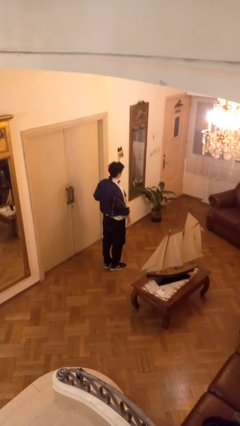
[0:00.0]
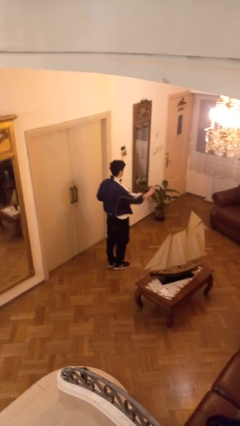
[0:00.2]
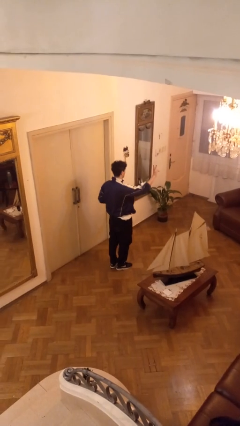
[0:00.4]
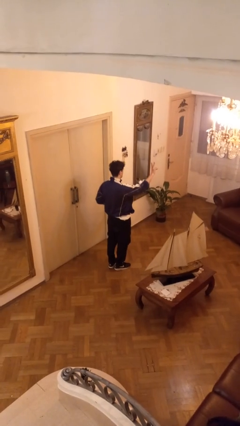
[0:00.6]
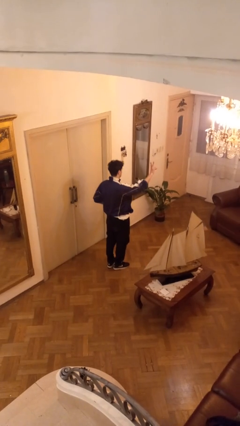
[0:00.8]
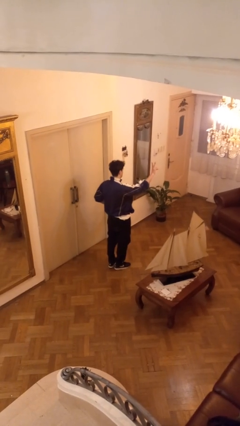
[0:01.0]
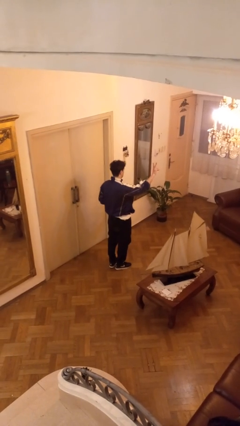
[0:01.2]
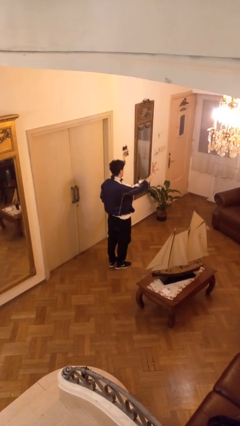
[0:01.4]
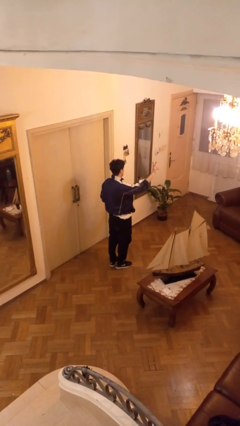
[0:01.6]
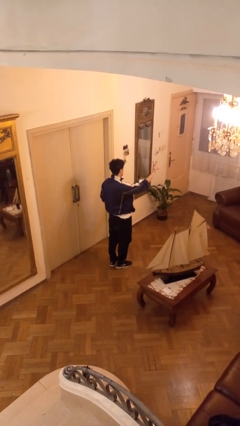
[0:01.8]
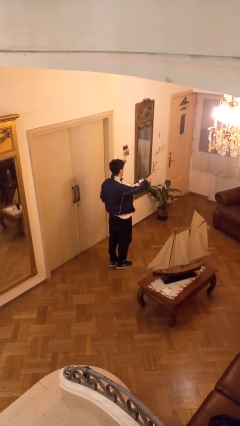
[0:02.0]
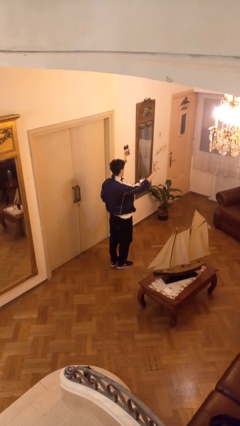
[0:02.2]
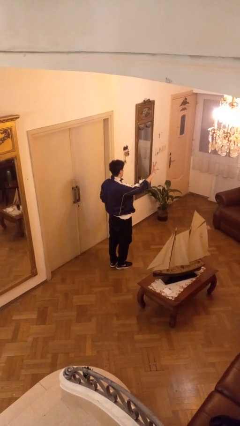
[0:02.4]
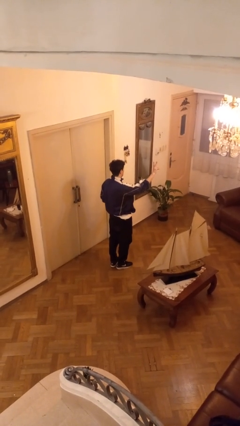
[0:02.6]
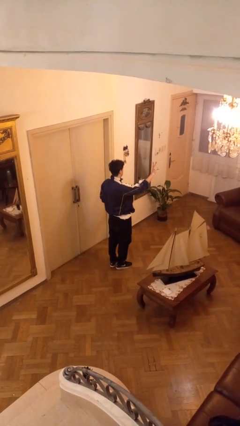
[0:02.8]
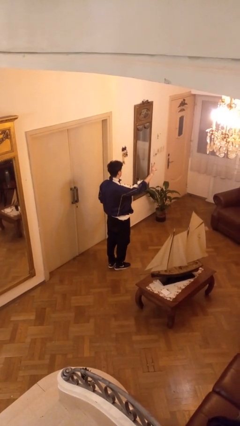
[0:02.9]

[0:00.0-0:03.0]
person gestures peace

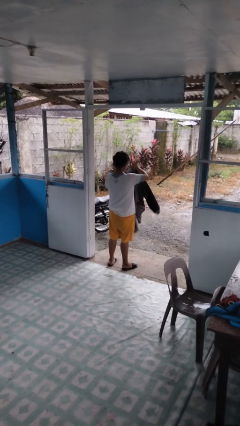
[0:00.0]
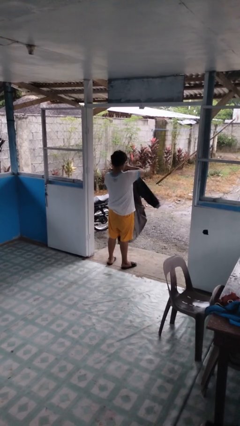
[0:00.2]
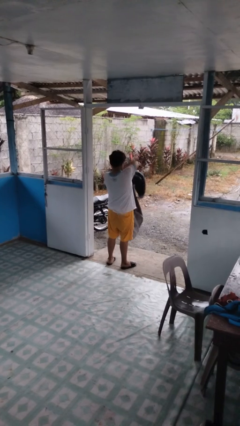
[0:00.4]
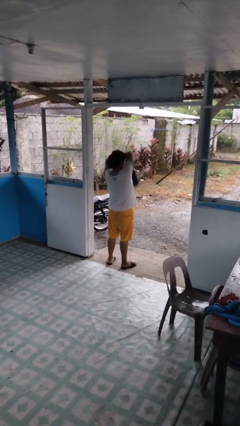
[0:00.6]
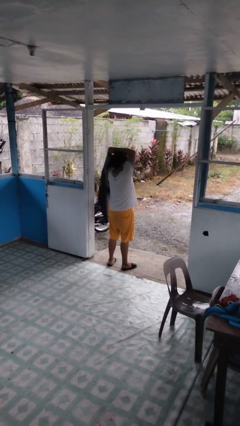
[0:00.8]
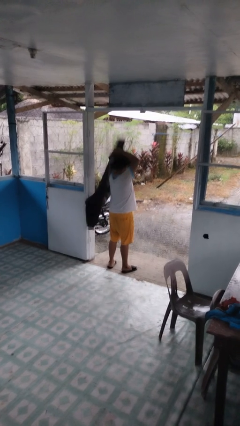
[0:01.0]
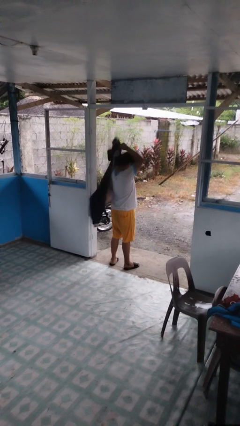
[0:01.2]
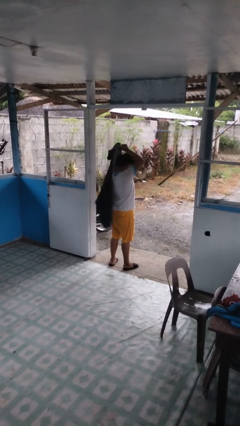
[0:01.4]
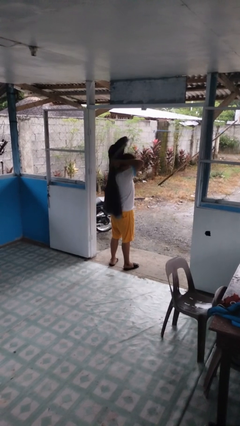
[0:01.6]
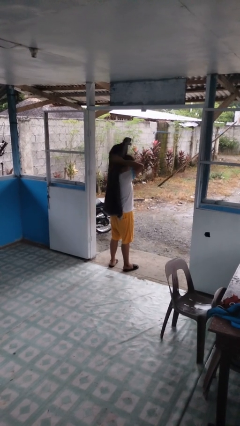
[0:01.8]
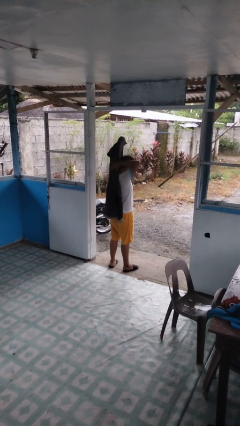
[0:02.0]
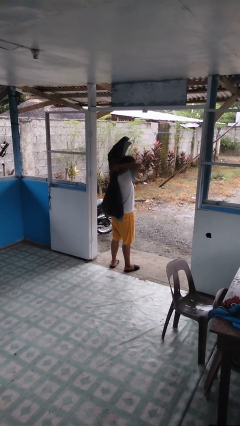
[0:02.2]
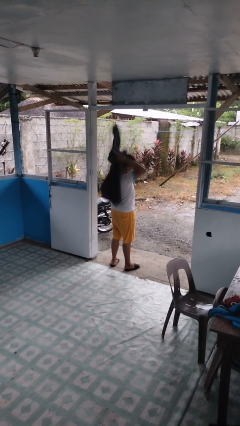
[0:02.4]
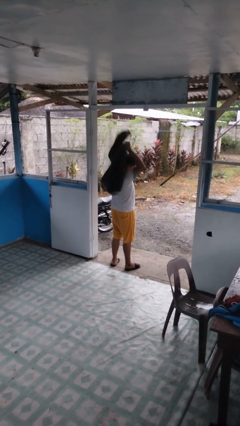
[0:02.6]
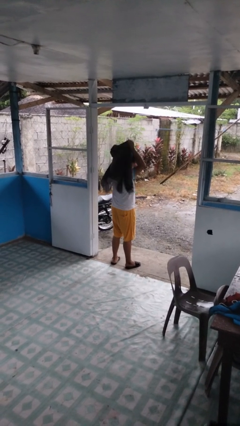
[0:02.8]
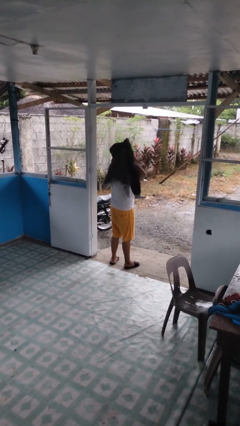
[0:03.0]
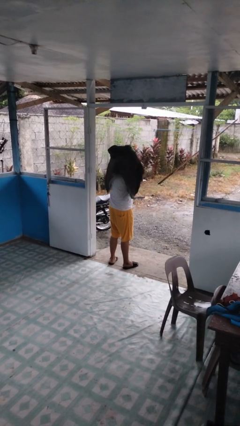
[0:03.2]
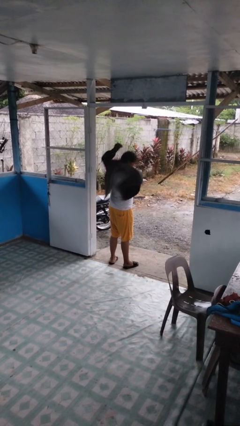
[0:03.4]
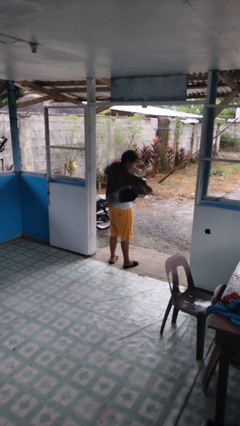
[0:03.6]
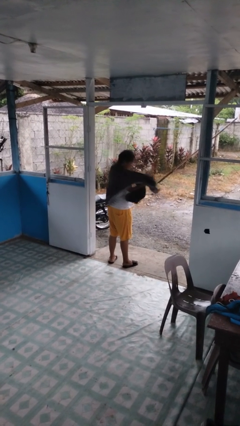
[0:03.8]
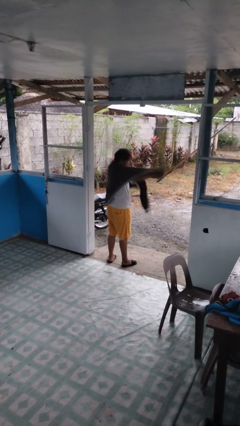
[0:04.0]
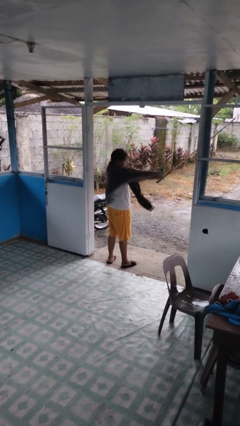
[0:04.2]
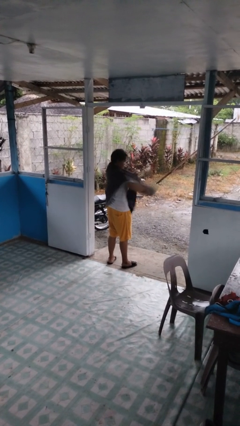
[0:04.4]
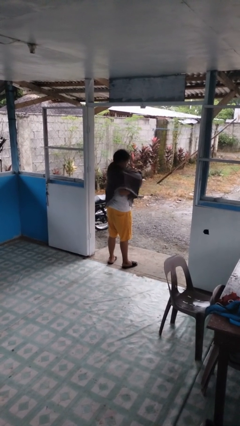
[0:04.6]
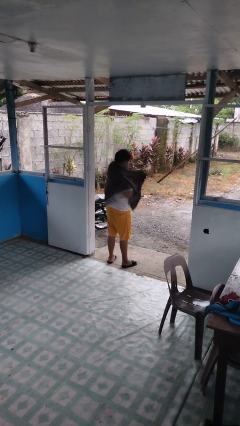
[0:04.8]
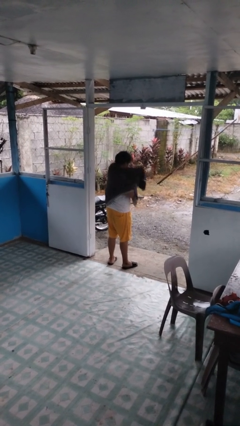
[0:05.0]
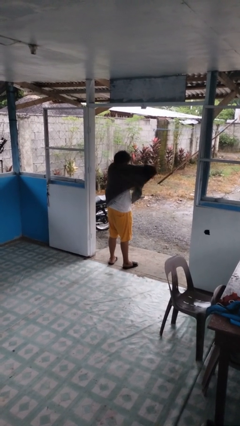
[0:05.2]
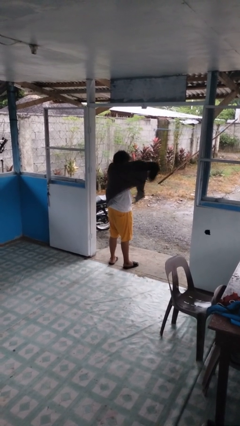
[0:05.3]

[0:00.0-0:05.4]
person puts on jacket

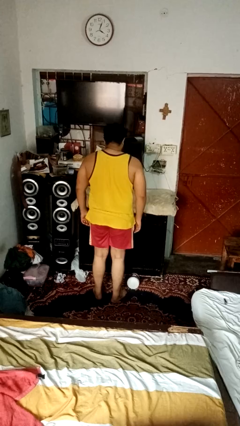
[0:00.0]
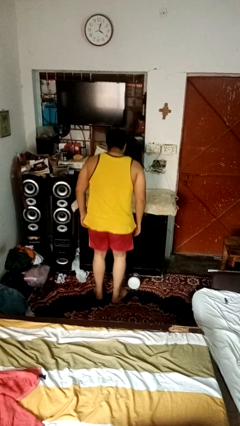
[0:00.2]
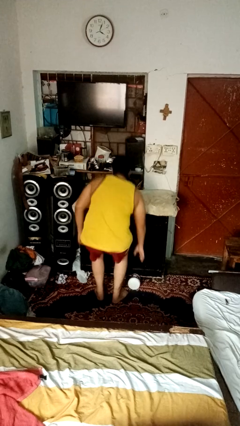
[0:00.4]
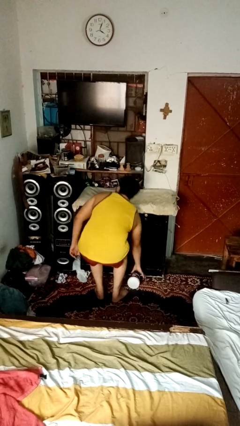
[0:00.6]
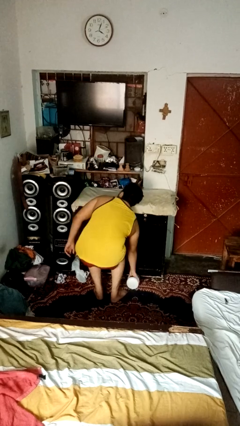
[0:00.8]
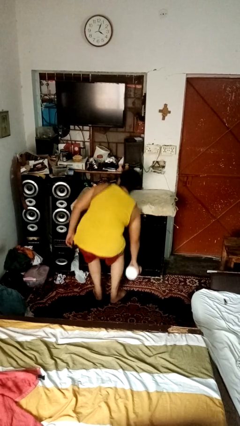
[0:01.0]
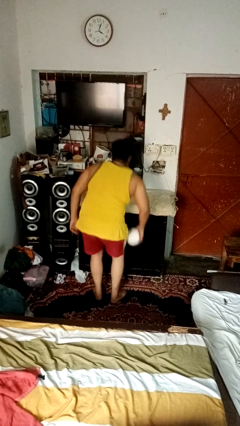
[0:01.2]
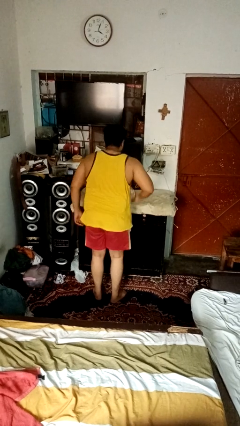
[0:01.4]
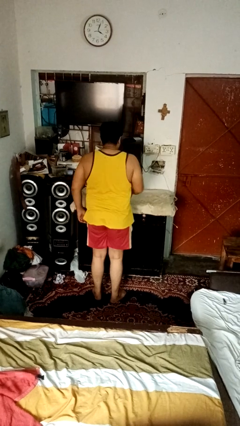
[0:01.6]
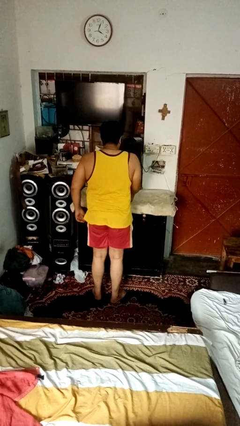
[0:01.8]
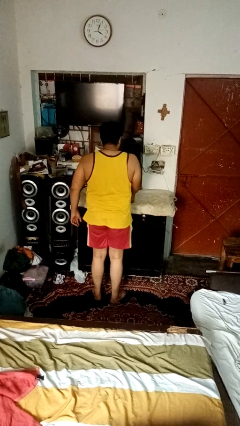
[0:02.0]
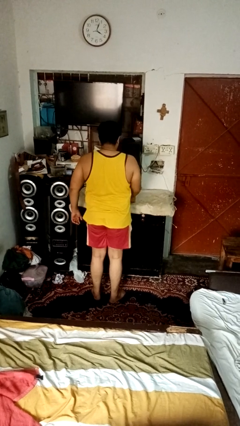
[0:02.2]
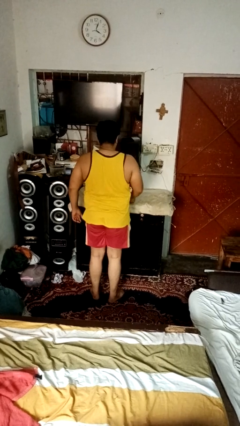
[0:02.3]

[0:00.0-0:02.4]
person sets upright furniture

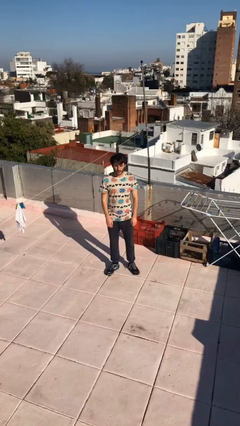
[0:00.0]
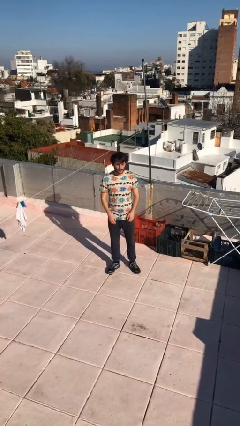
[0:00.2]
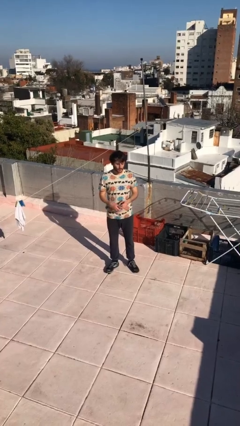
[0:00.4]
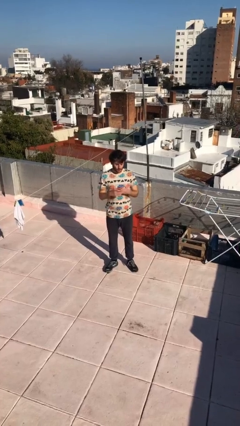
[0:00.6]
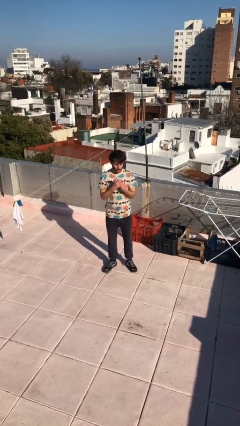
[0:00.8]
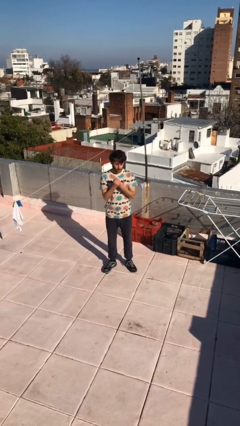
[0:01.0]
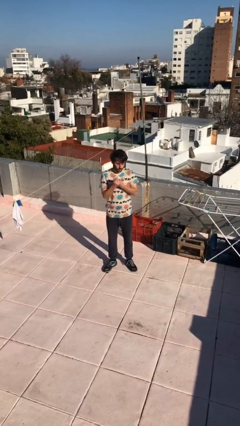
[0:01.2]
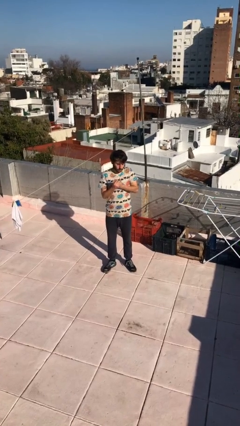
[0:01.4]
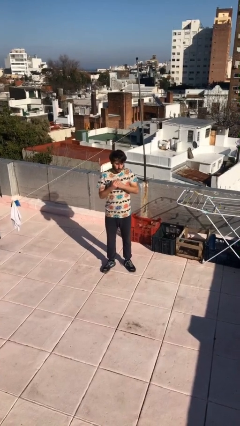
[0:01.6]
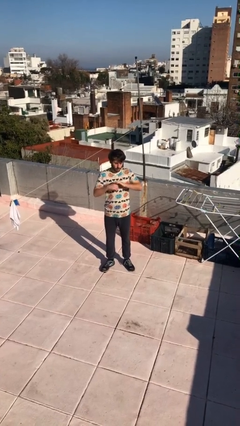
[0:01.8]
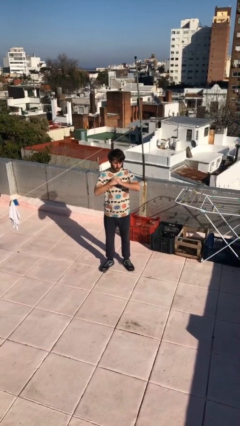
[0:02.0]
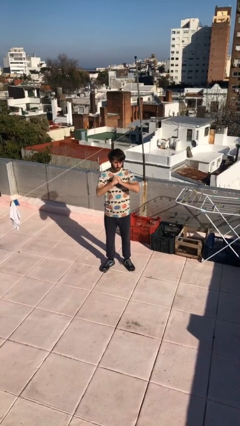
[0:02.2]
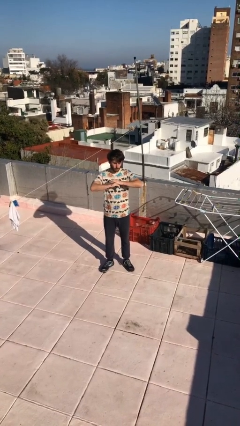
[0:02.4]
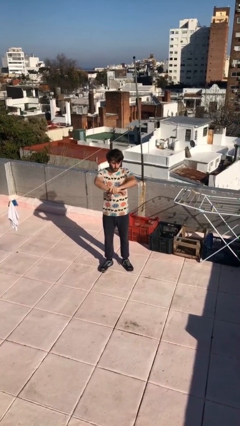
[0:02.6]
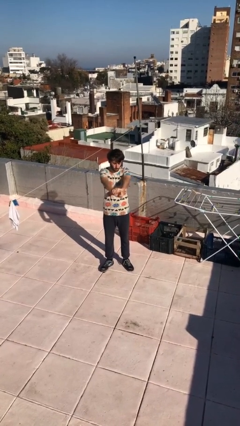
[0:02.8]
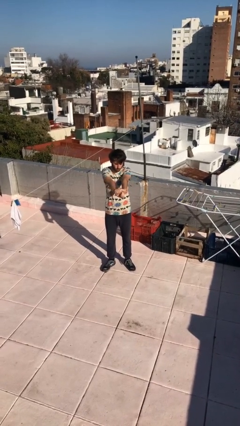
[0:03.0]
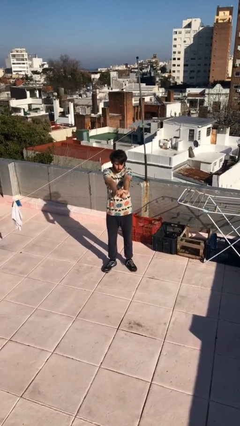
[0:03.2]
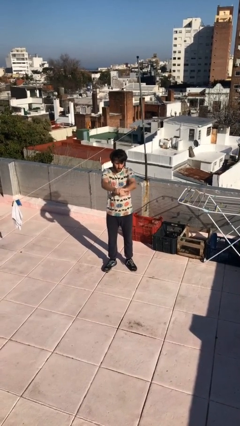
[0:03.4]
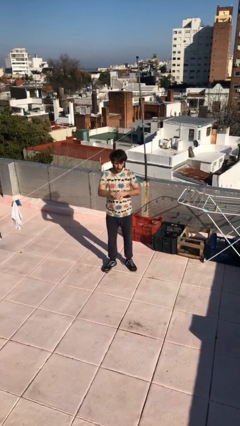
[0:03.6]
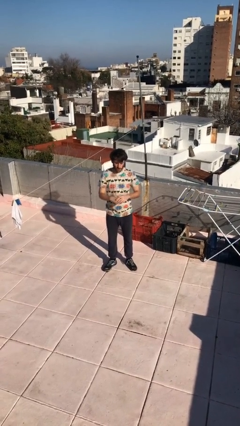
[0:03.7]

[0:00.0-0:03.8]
person cracks knuckles

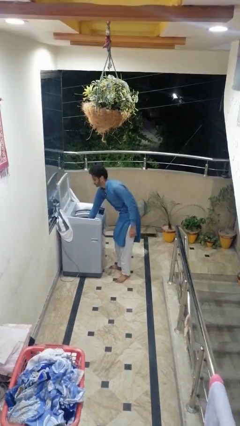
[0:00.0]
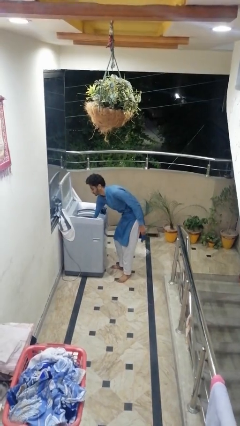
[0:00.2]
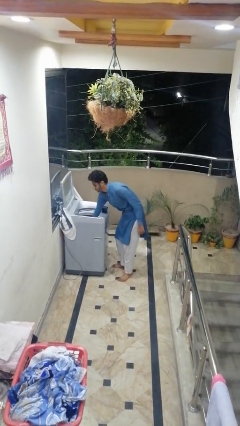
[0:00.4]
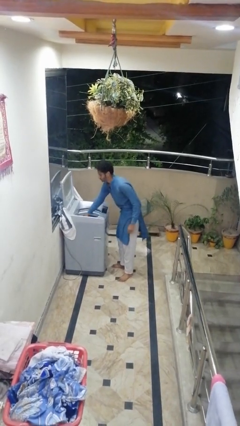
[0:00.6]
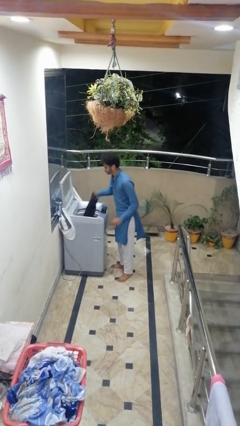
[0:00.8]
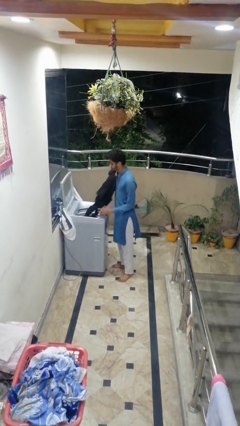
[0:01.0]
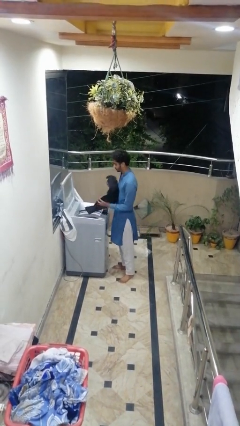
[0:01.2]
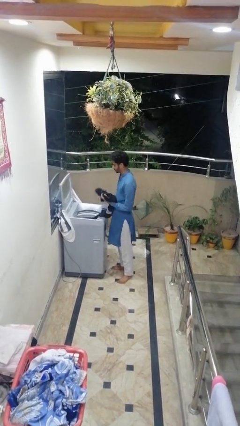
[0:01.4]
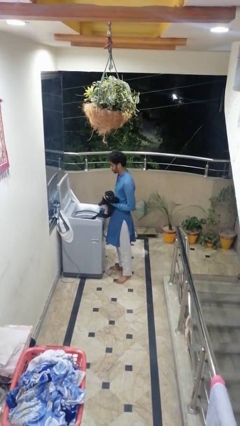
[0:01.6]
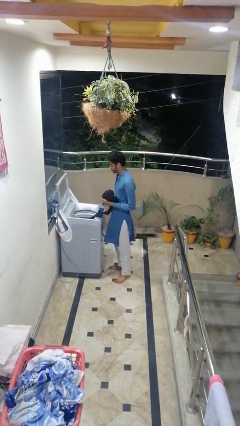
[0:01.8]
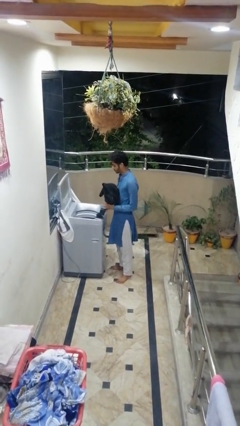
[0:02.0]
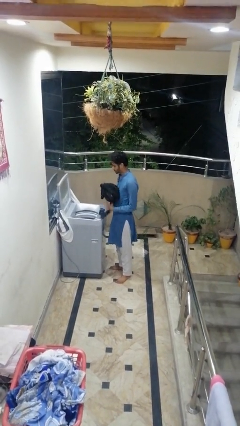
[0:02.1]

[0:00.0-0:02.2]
person loads clotheswasher

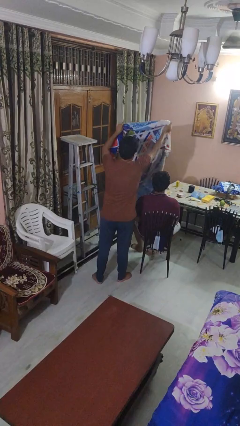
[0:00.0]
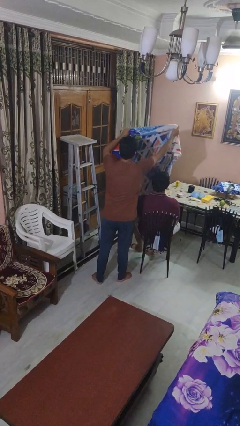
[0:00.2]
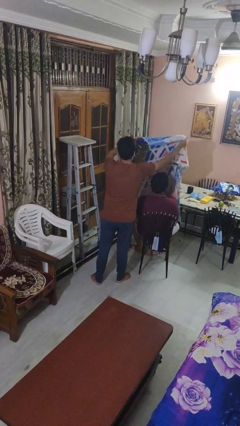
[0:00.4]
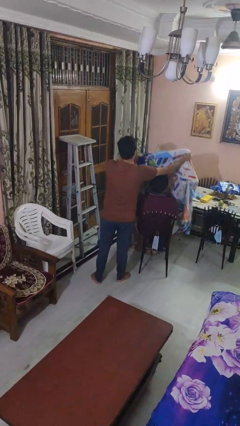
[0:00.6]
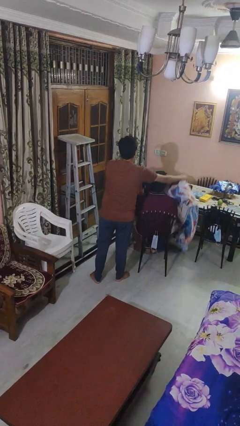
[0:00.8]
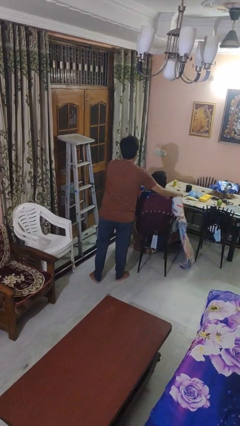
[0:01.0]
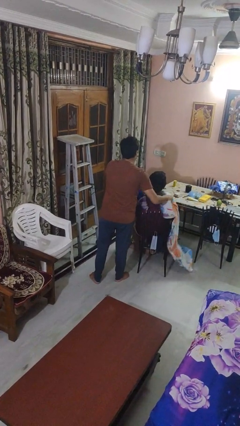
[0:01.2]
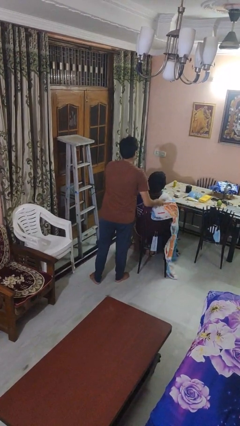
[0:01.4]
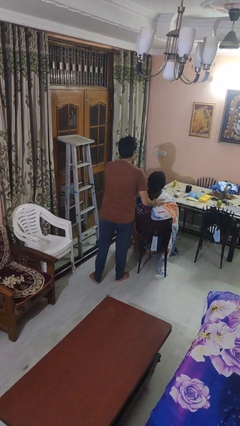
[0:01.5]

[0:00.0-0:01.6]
person covers friend with blanket
